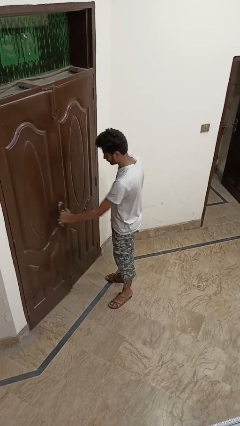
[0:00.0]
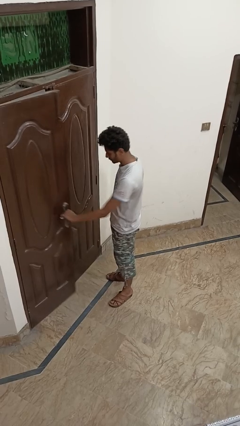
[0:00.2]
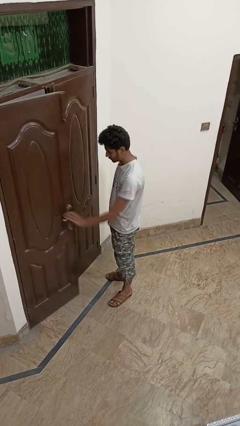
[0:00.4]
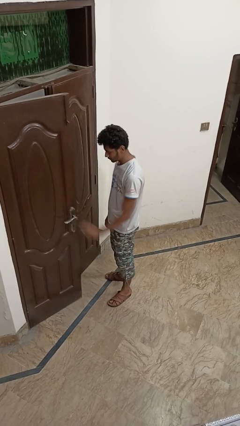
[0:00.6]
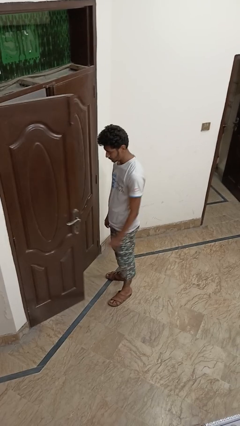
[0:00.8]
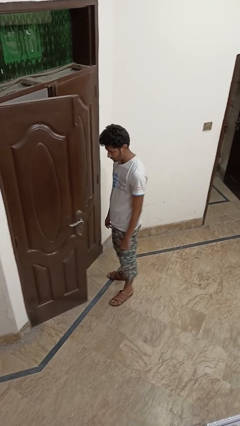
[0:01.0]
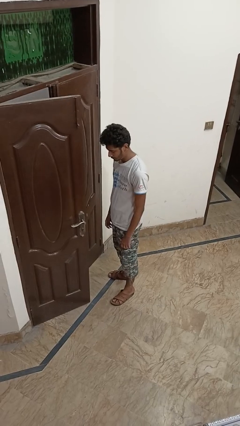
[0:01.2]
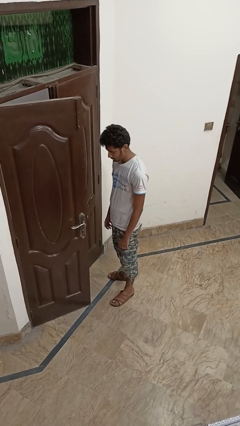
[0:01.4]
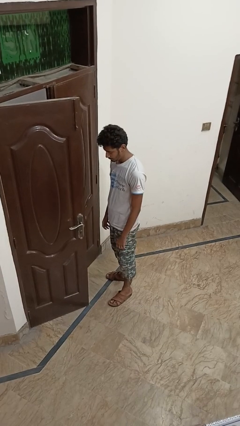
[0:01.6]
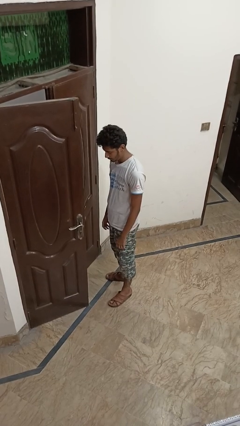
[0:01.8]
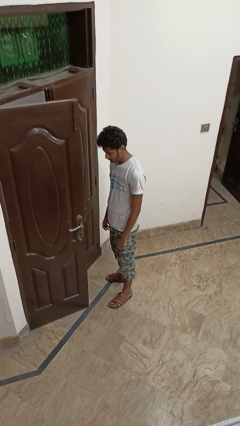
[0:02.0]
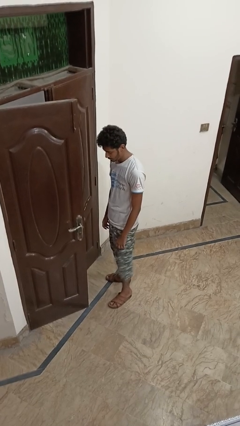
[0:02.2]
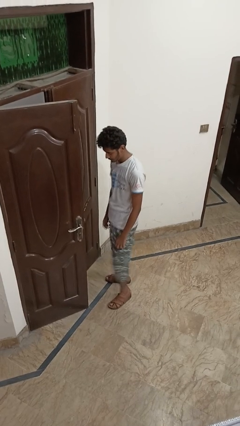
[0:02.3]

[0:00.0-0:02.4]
person opens facility door

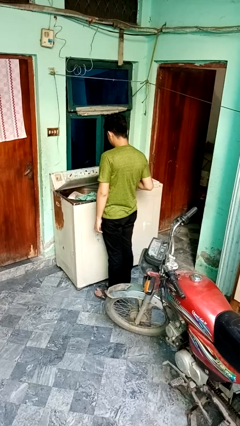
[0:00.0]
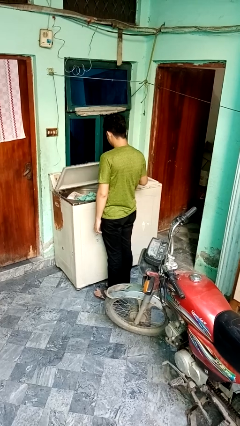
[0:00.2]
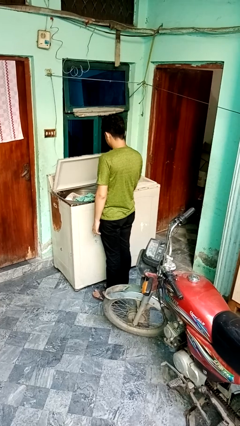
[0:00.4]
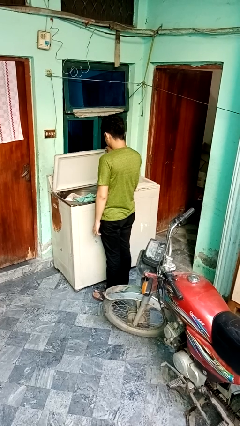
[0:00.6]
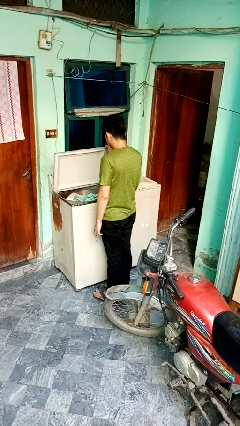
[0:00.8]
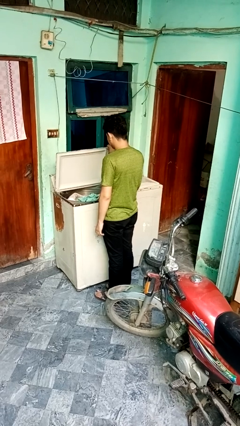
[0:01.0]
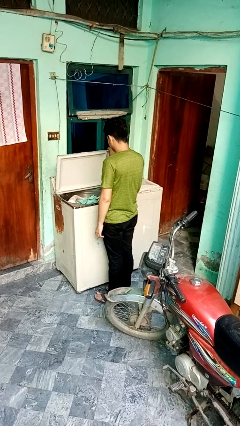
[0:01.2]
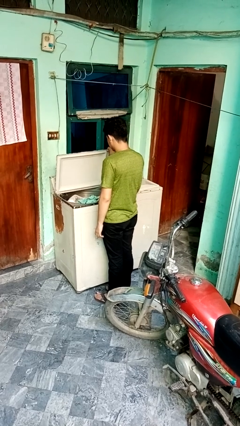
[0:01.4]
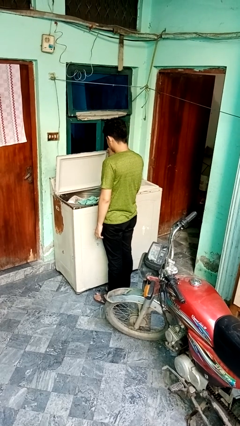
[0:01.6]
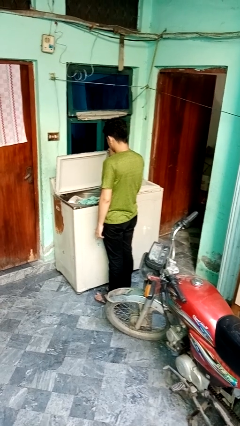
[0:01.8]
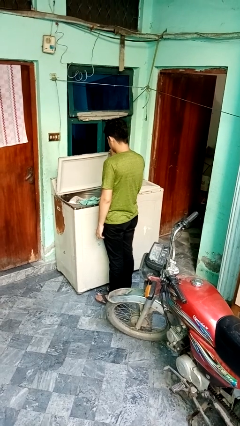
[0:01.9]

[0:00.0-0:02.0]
person opens clothes washer

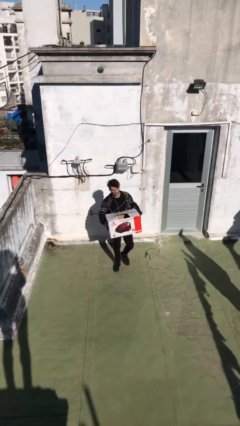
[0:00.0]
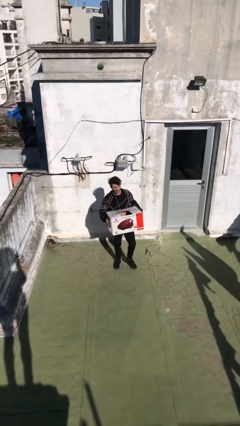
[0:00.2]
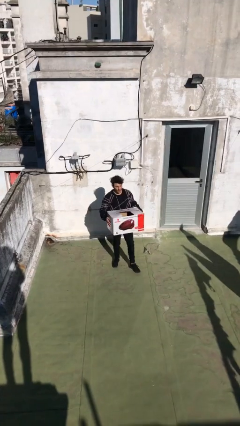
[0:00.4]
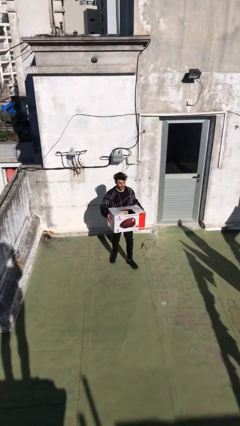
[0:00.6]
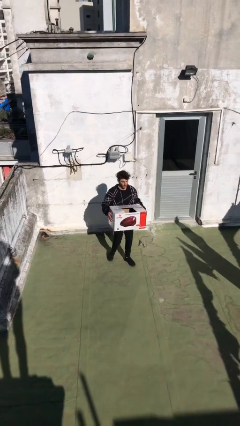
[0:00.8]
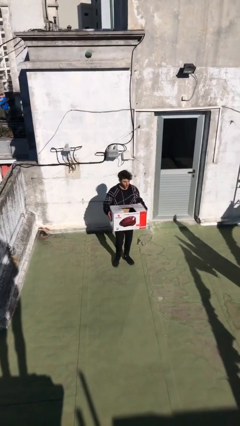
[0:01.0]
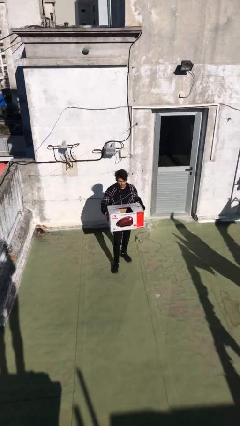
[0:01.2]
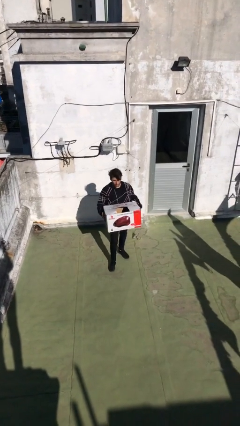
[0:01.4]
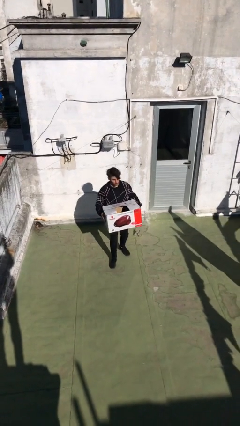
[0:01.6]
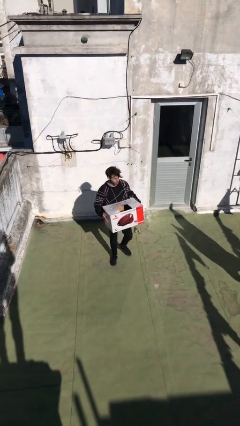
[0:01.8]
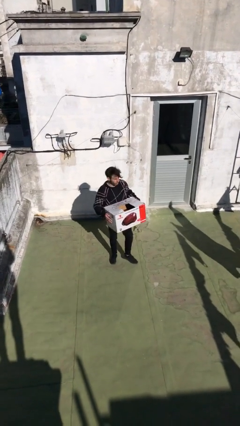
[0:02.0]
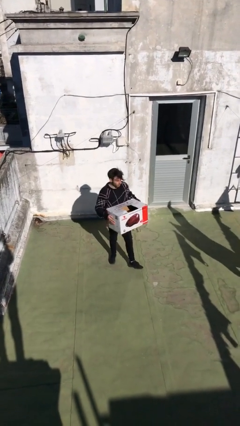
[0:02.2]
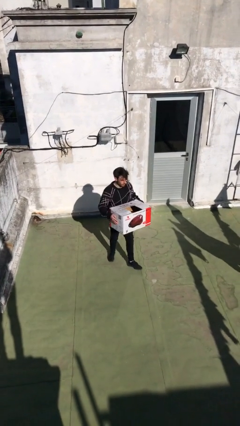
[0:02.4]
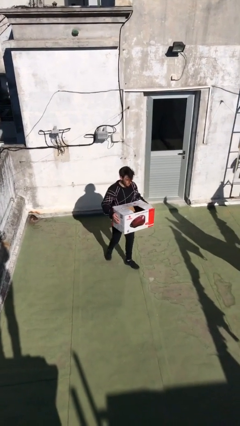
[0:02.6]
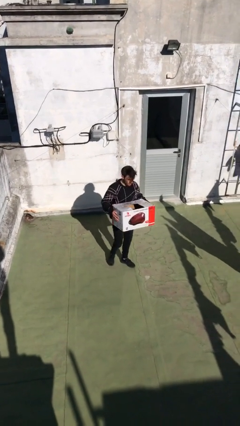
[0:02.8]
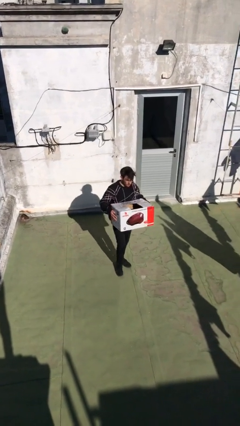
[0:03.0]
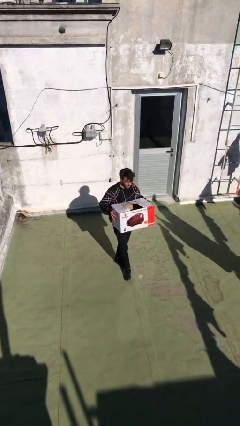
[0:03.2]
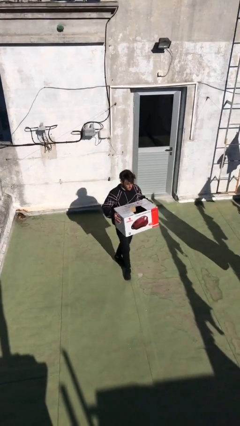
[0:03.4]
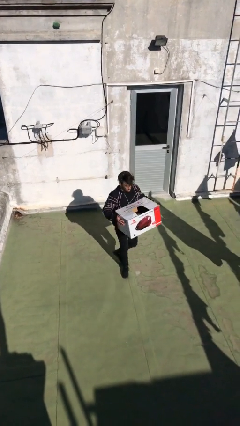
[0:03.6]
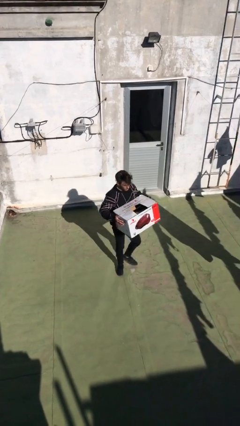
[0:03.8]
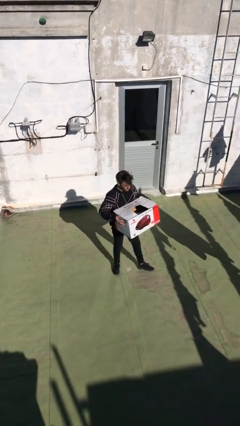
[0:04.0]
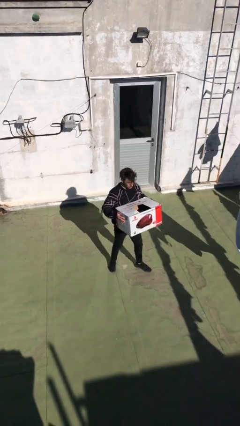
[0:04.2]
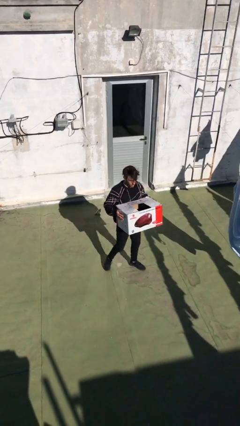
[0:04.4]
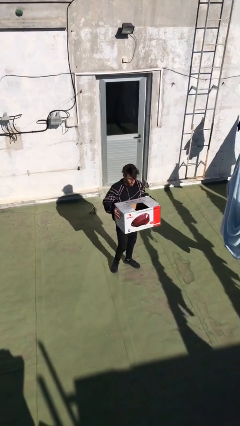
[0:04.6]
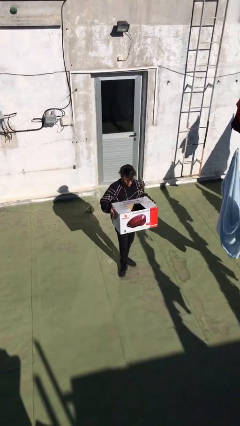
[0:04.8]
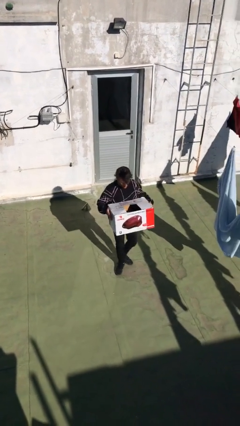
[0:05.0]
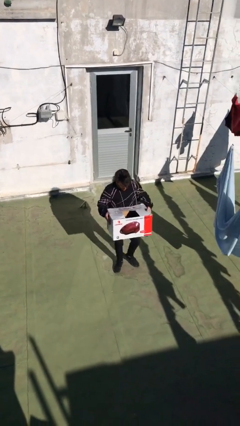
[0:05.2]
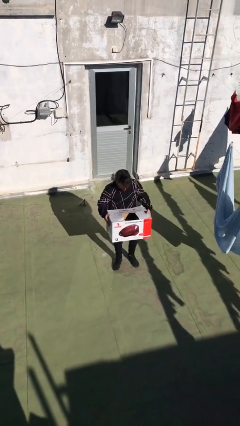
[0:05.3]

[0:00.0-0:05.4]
person carries heavy object

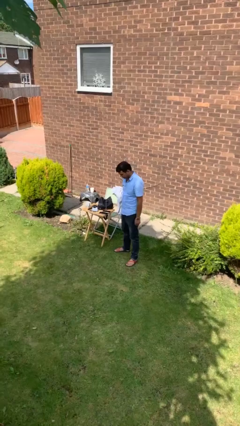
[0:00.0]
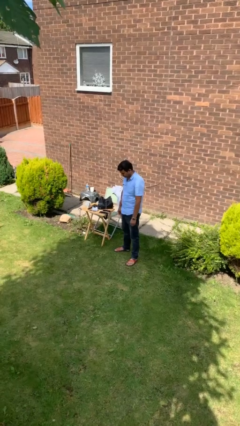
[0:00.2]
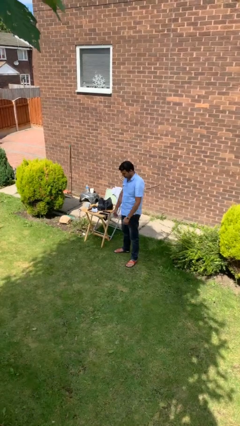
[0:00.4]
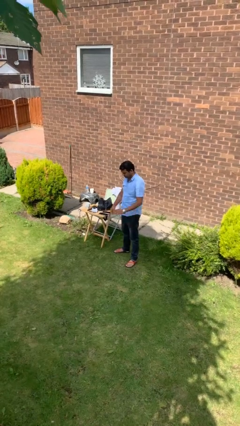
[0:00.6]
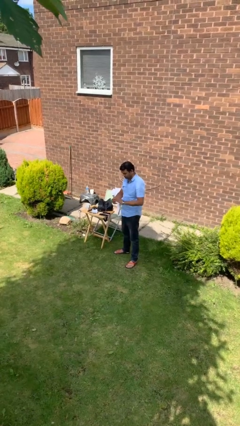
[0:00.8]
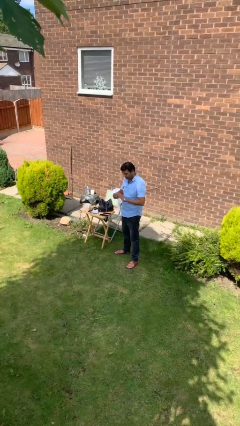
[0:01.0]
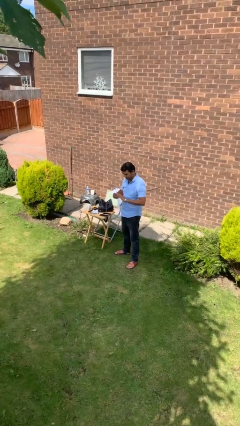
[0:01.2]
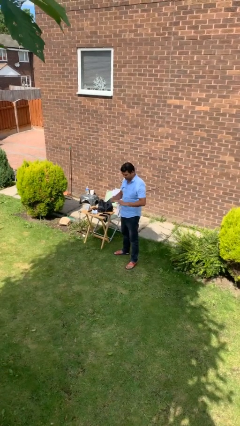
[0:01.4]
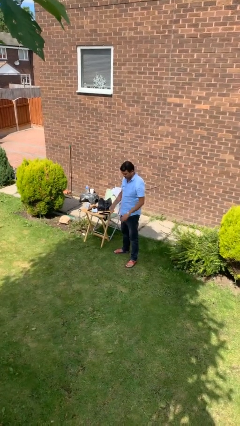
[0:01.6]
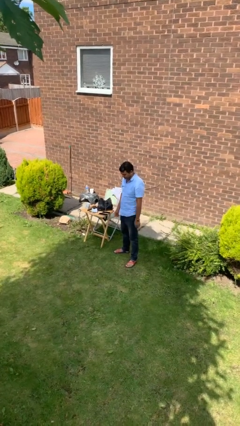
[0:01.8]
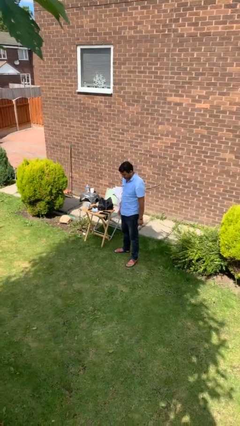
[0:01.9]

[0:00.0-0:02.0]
person takes off ring

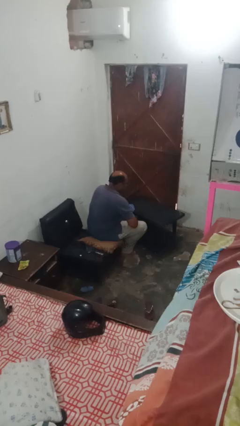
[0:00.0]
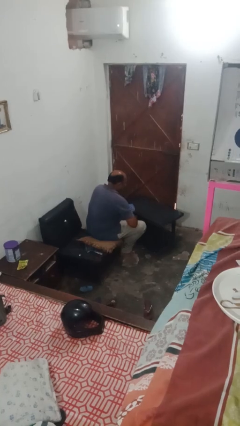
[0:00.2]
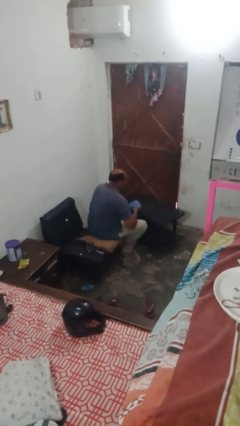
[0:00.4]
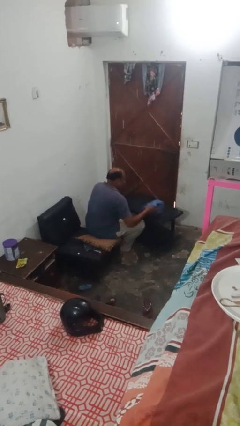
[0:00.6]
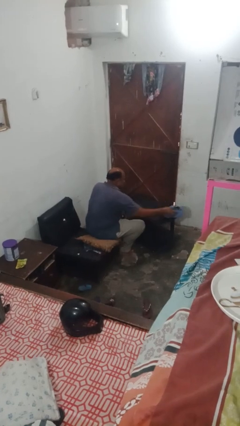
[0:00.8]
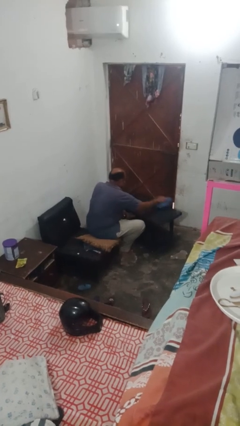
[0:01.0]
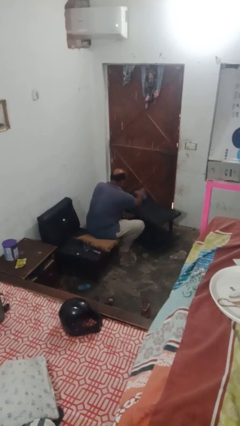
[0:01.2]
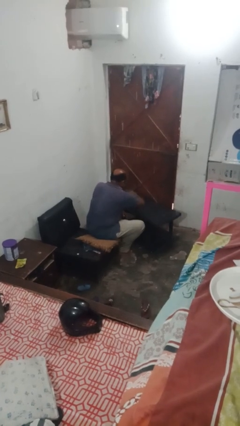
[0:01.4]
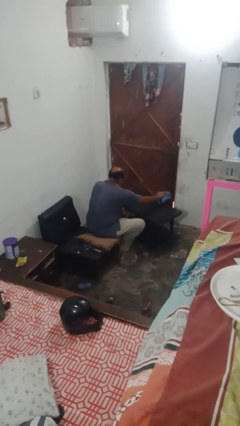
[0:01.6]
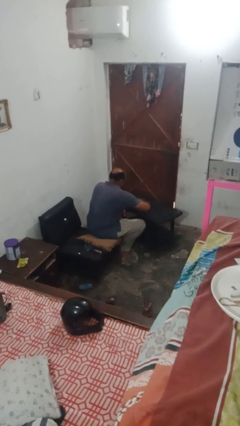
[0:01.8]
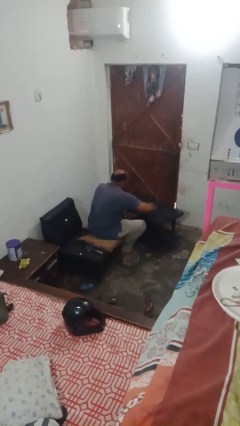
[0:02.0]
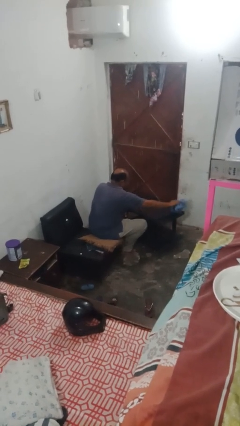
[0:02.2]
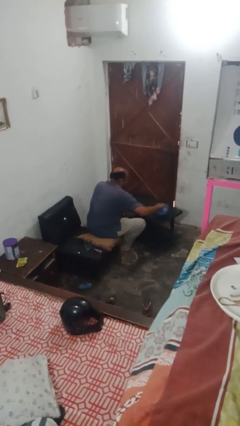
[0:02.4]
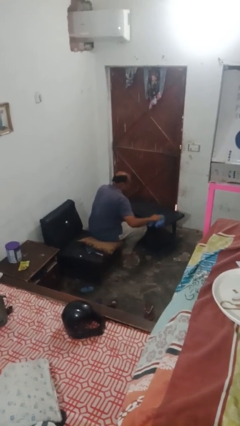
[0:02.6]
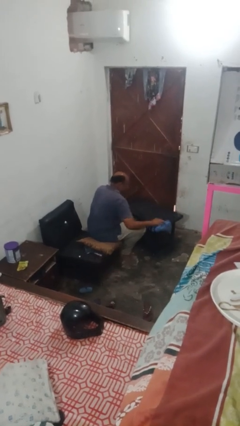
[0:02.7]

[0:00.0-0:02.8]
person cleans table with rag

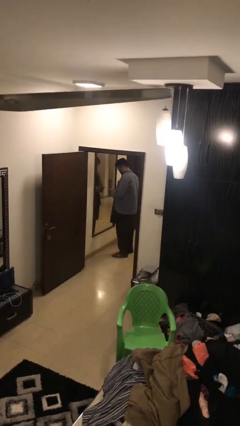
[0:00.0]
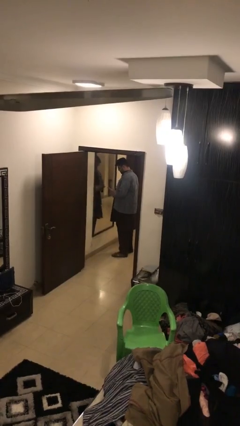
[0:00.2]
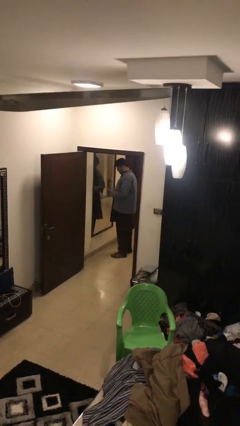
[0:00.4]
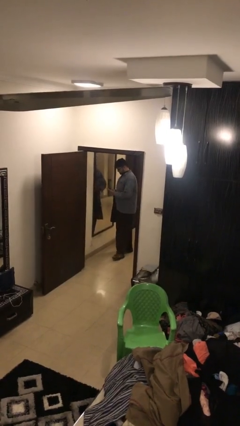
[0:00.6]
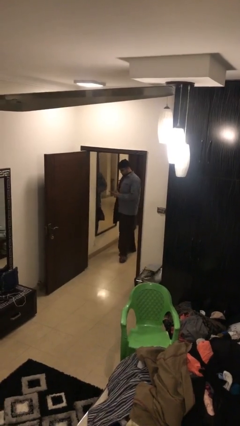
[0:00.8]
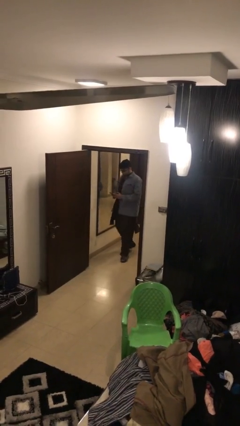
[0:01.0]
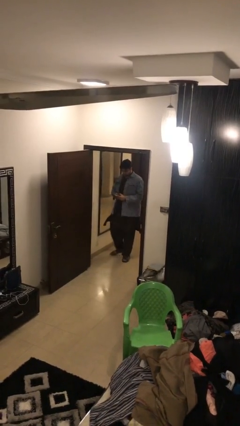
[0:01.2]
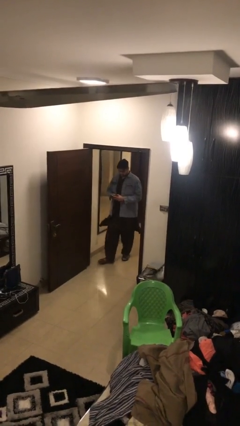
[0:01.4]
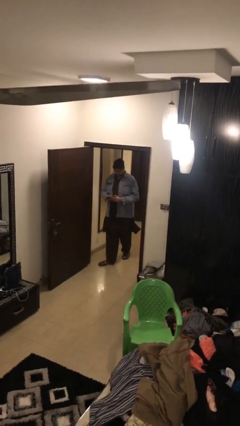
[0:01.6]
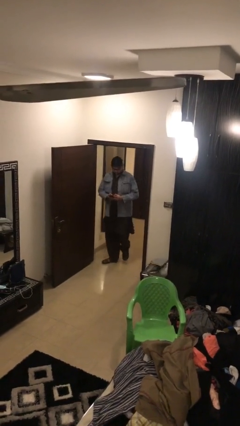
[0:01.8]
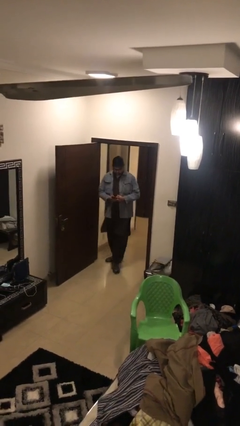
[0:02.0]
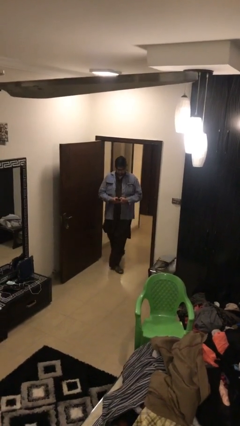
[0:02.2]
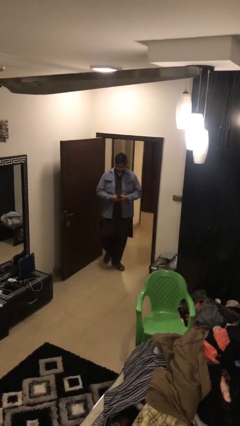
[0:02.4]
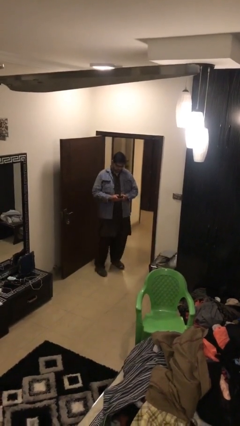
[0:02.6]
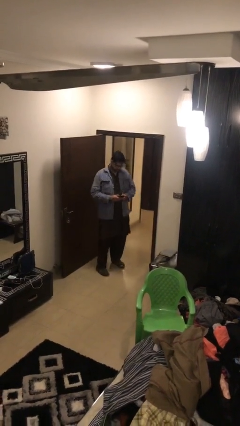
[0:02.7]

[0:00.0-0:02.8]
person enters scene through structure

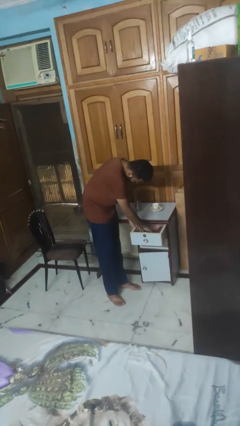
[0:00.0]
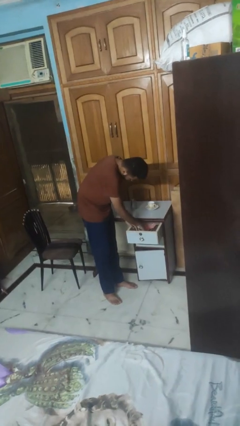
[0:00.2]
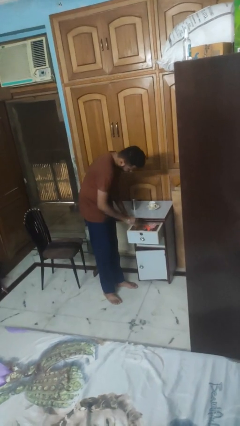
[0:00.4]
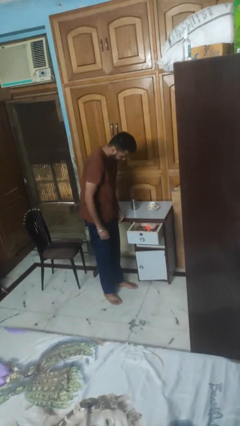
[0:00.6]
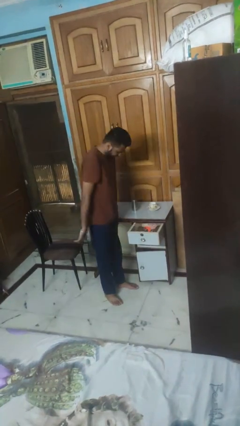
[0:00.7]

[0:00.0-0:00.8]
person searches in kitchen drawer
